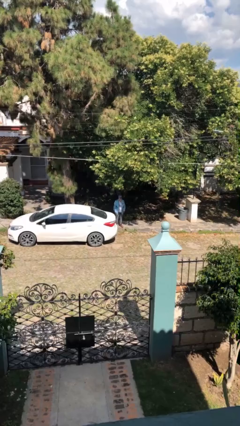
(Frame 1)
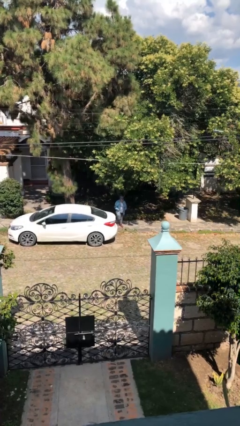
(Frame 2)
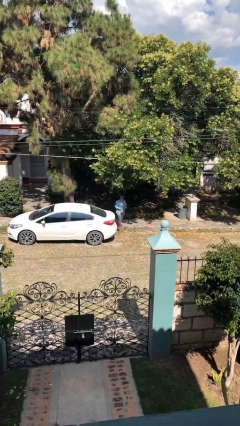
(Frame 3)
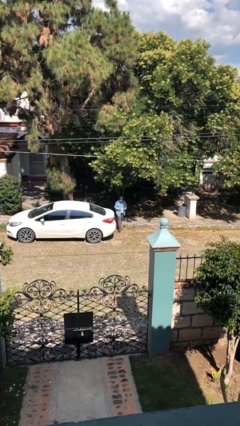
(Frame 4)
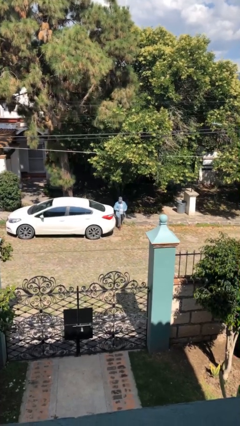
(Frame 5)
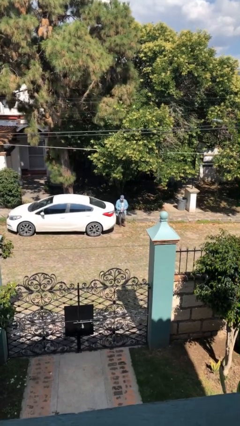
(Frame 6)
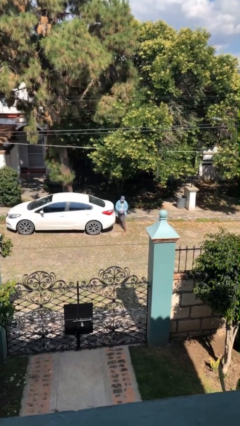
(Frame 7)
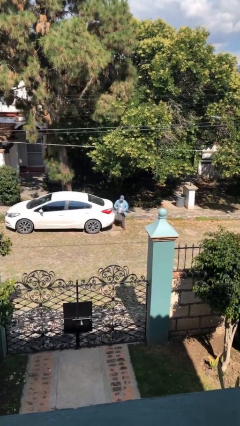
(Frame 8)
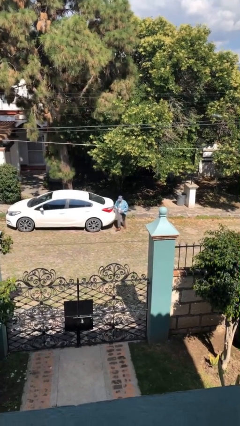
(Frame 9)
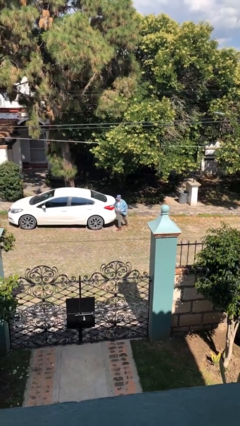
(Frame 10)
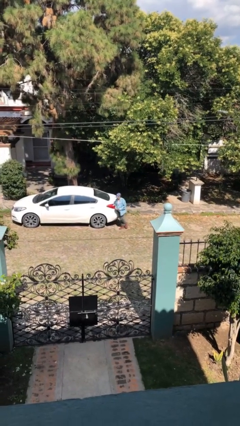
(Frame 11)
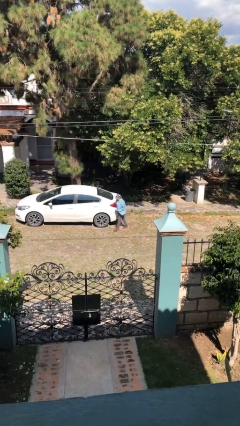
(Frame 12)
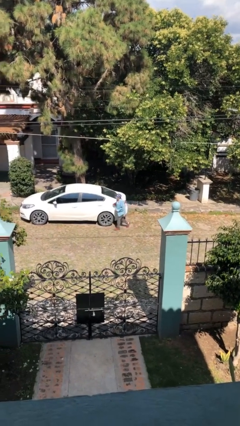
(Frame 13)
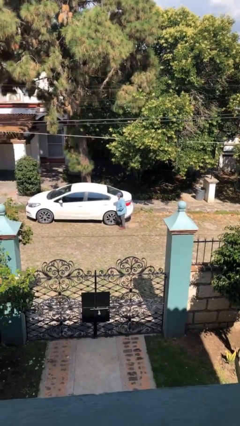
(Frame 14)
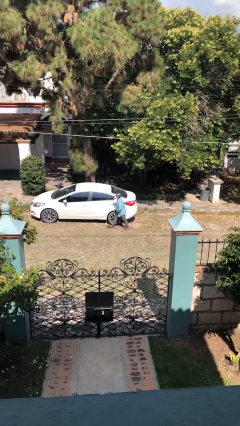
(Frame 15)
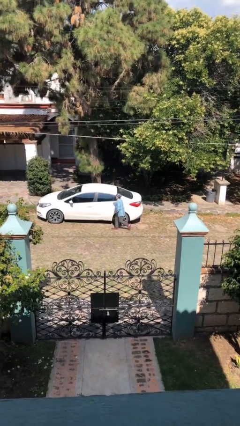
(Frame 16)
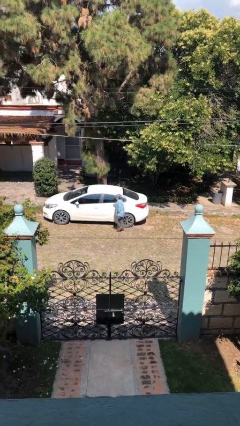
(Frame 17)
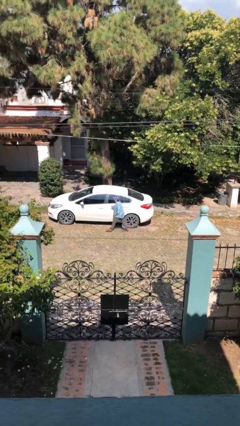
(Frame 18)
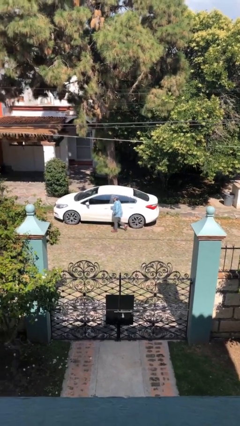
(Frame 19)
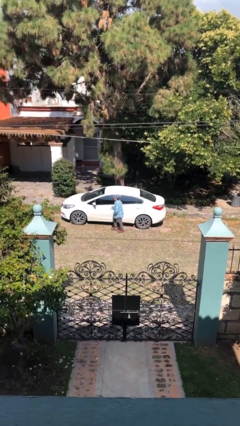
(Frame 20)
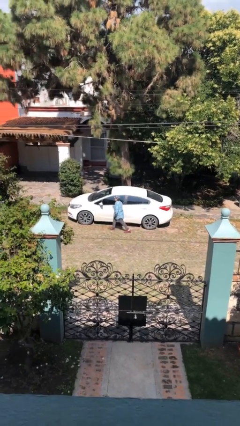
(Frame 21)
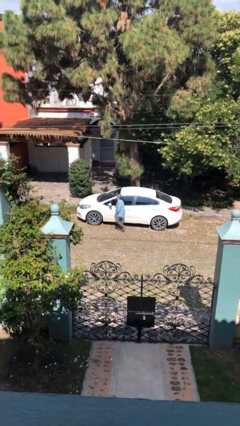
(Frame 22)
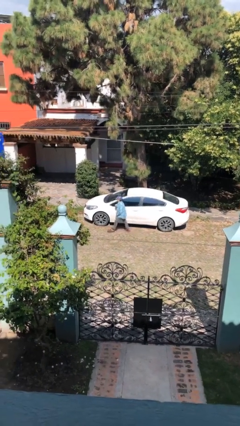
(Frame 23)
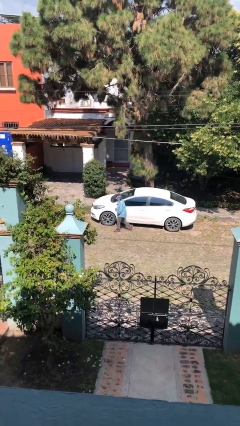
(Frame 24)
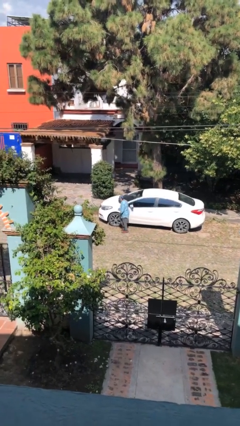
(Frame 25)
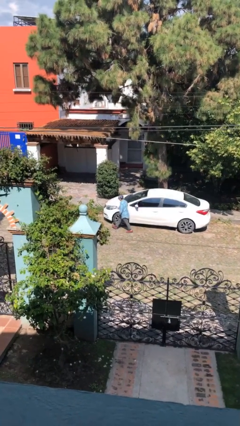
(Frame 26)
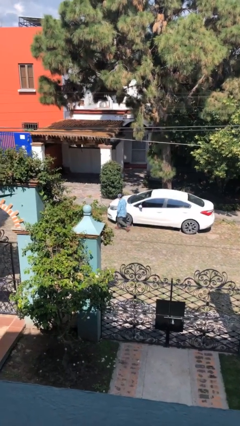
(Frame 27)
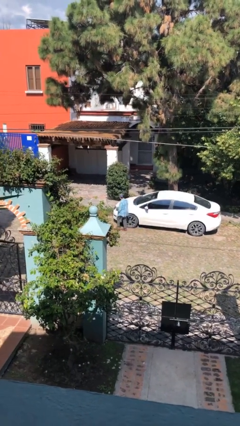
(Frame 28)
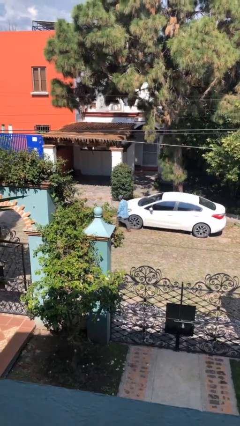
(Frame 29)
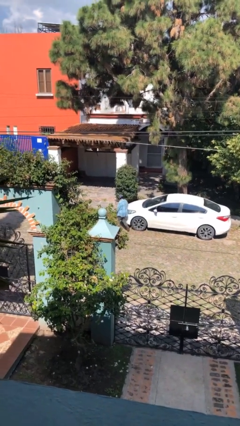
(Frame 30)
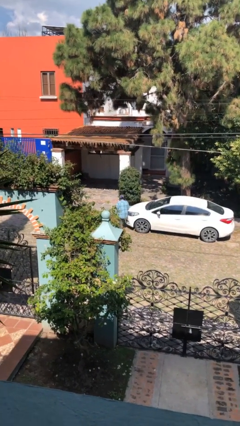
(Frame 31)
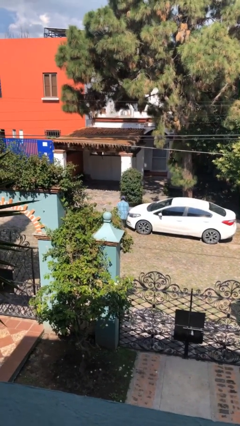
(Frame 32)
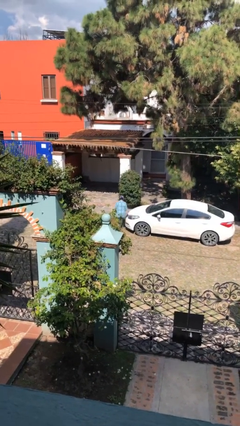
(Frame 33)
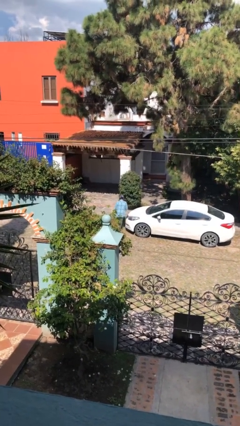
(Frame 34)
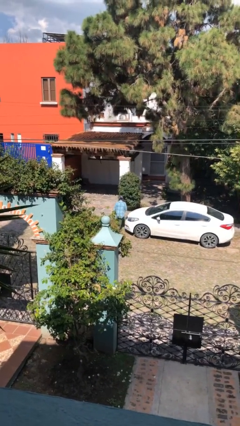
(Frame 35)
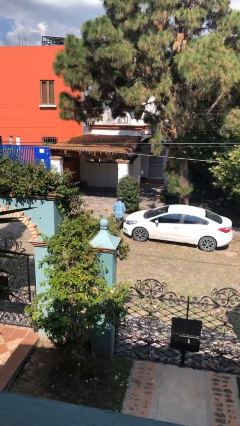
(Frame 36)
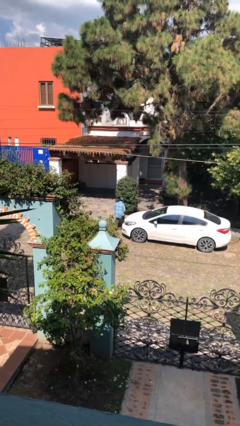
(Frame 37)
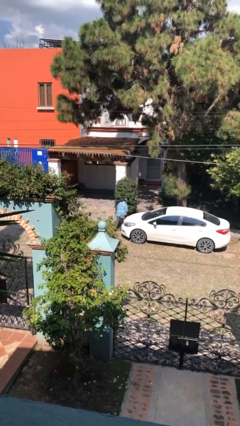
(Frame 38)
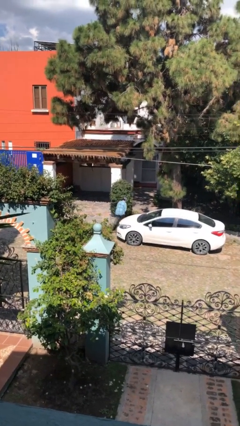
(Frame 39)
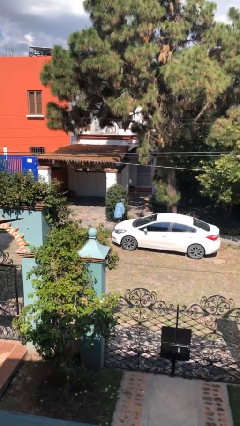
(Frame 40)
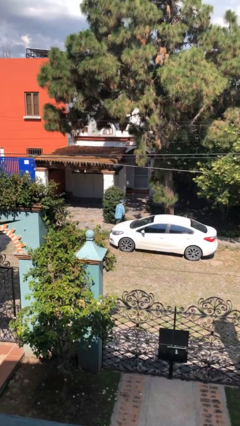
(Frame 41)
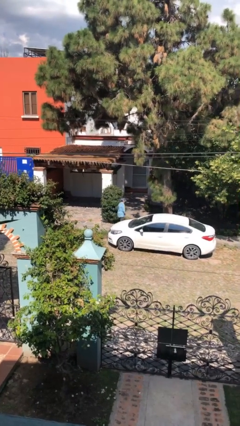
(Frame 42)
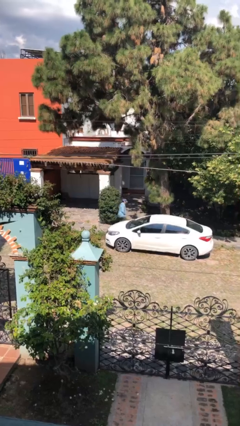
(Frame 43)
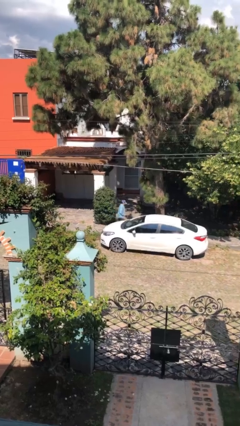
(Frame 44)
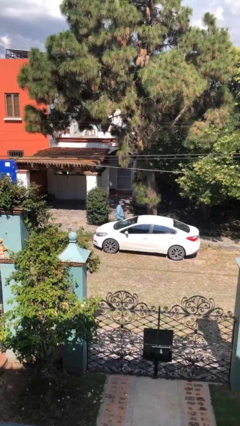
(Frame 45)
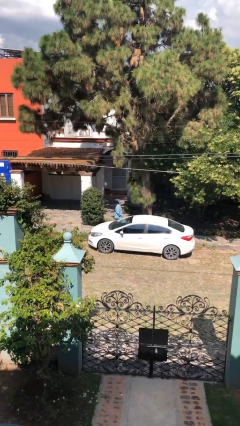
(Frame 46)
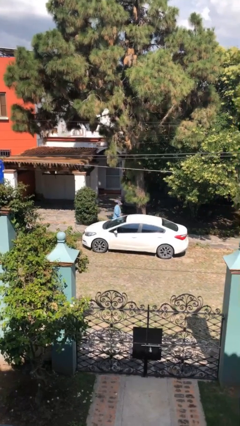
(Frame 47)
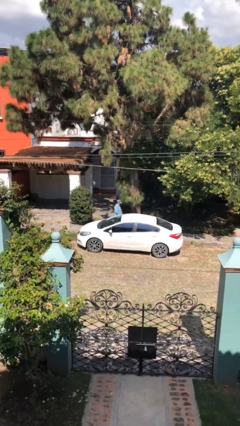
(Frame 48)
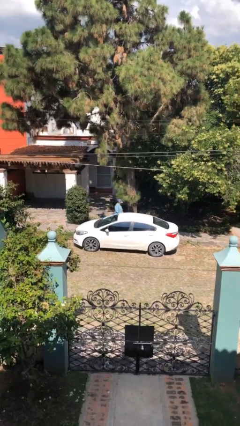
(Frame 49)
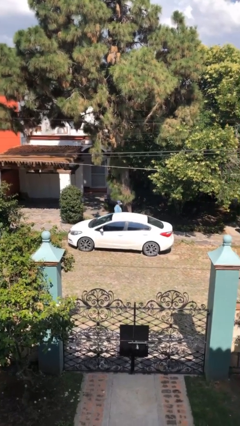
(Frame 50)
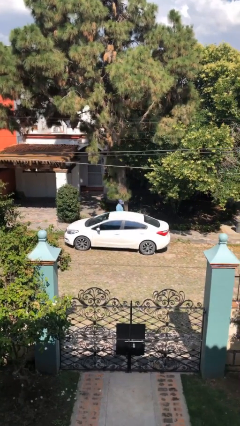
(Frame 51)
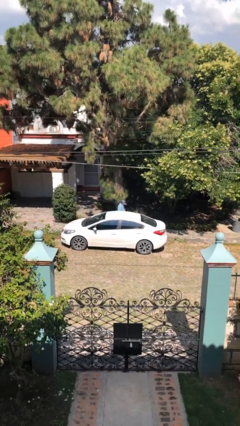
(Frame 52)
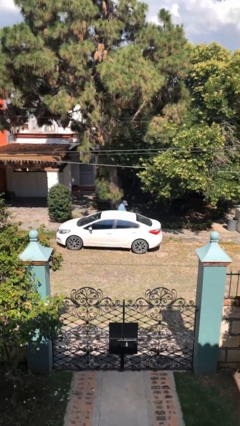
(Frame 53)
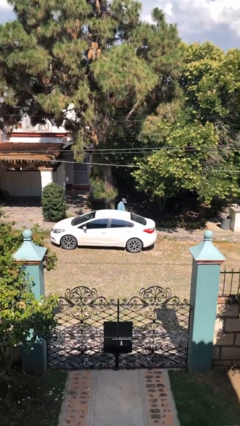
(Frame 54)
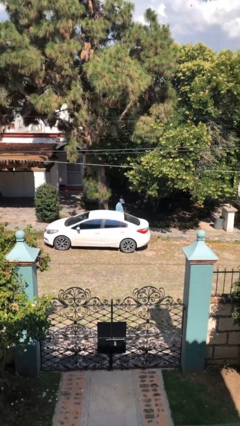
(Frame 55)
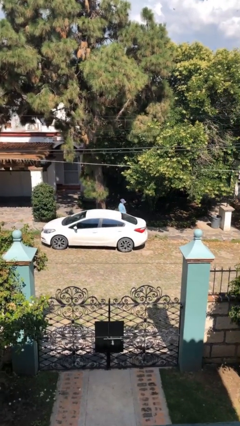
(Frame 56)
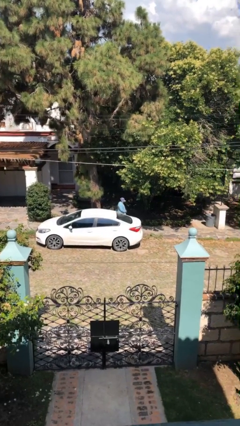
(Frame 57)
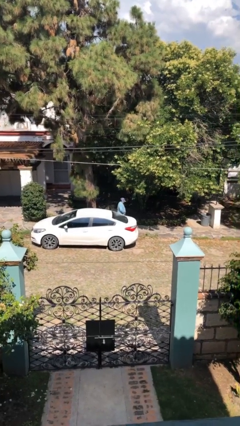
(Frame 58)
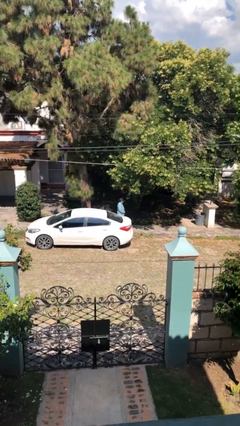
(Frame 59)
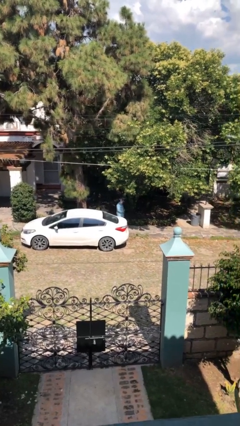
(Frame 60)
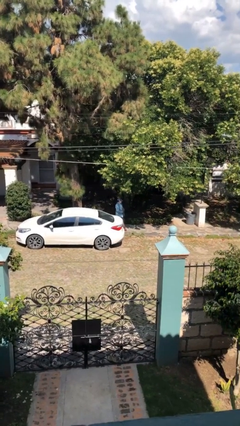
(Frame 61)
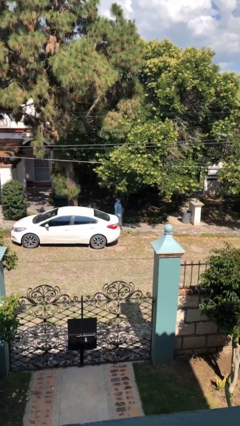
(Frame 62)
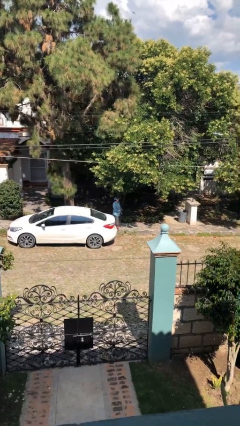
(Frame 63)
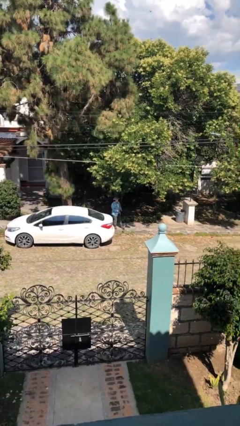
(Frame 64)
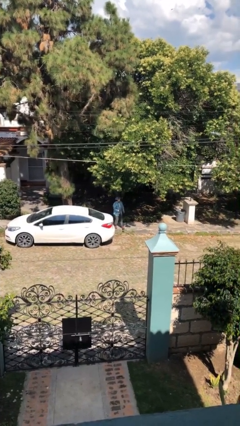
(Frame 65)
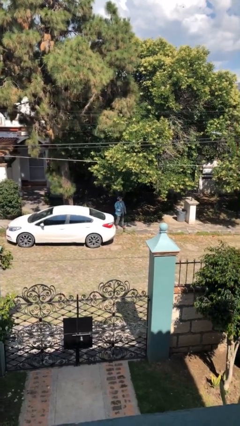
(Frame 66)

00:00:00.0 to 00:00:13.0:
person walks around car

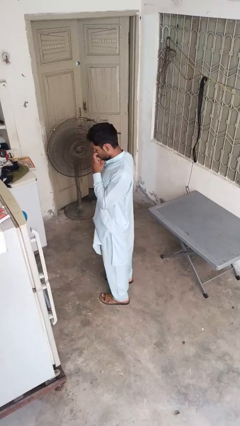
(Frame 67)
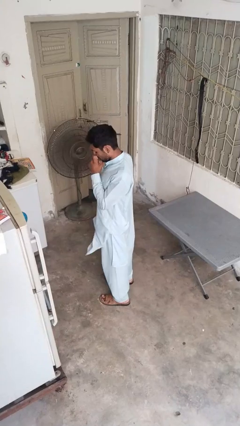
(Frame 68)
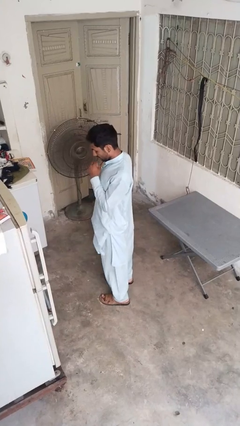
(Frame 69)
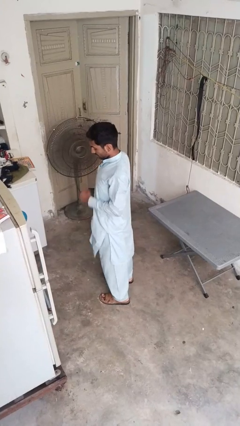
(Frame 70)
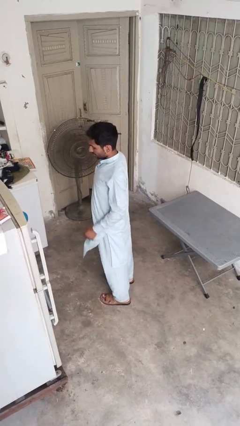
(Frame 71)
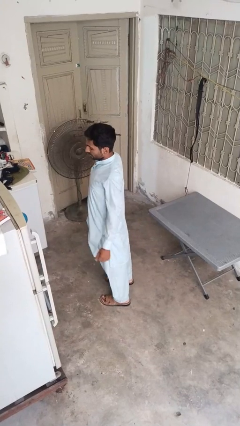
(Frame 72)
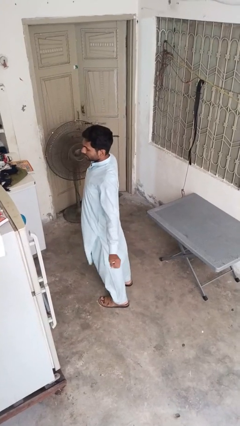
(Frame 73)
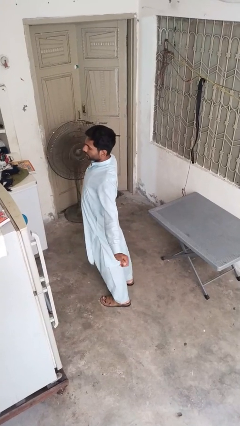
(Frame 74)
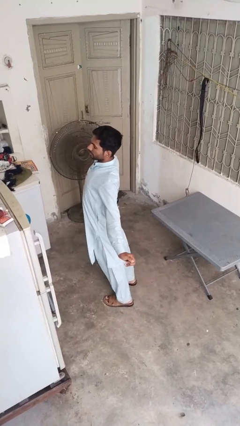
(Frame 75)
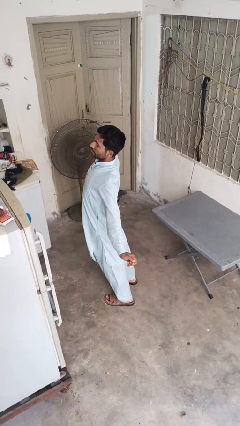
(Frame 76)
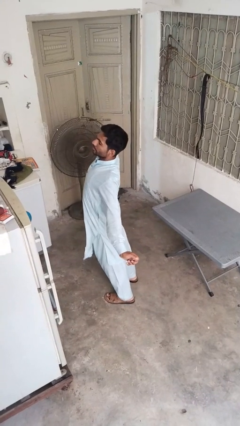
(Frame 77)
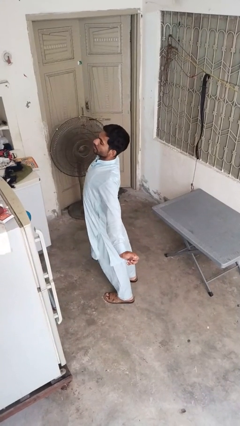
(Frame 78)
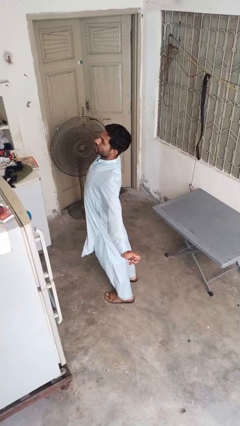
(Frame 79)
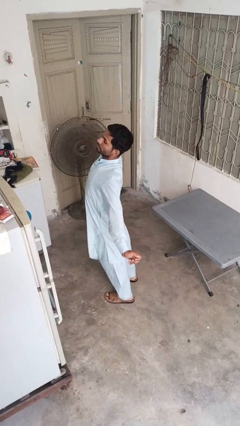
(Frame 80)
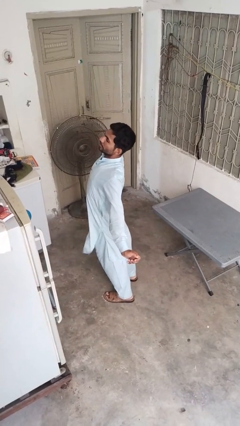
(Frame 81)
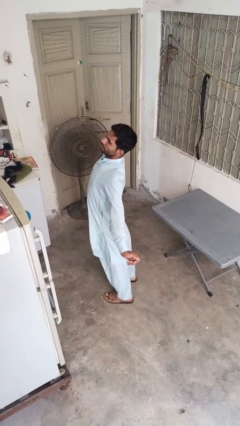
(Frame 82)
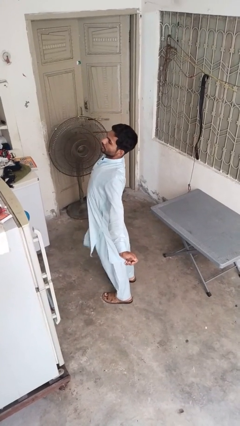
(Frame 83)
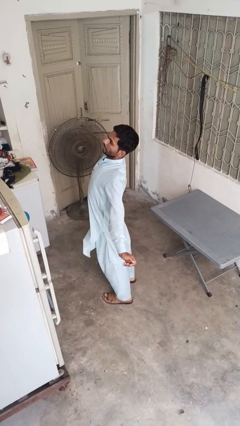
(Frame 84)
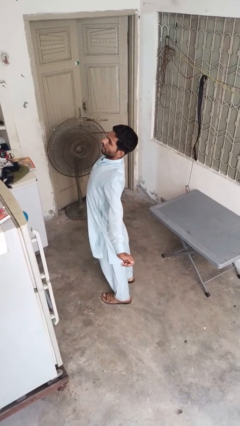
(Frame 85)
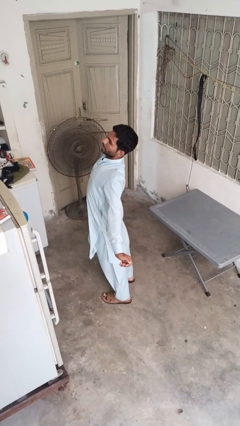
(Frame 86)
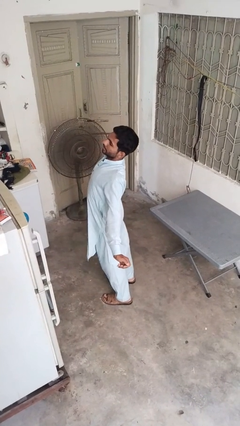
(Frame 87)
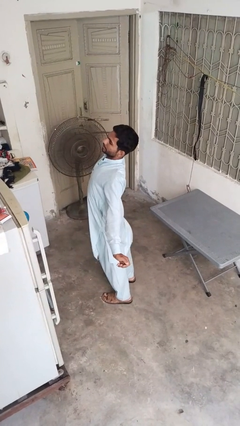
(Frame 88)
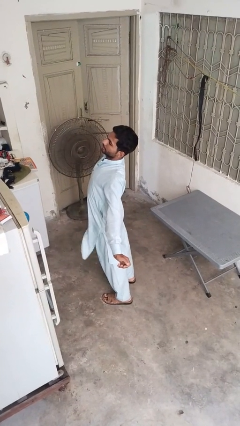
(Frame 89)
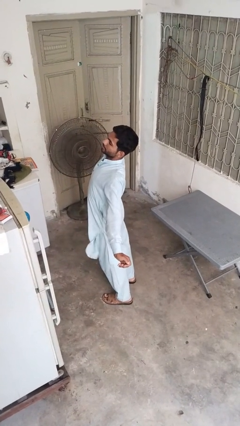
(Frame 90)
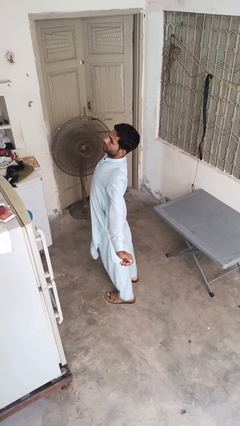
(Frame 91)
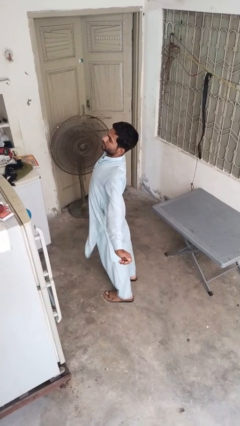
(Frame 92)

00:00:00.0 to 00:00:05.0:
person stretches back

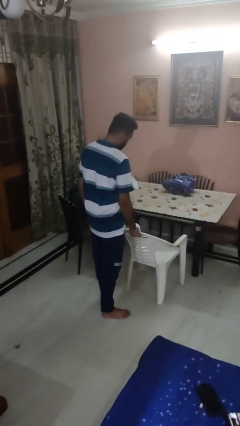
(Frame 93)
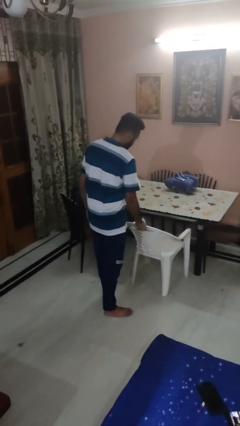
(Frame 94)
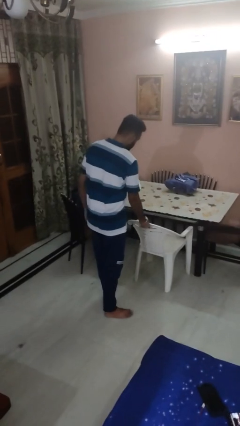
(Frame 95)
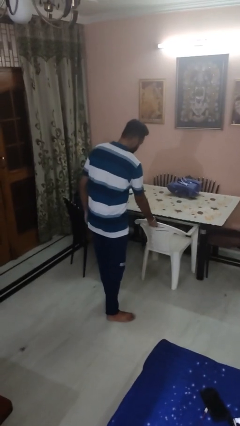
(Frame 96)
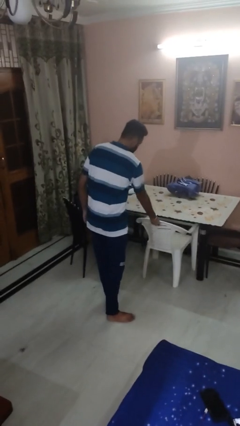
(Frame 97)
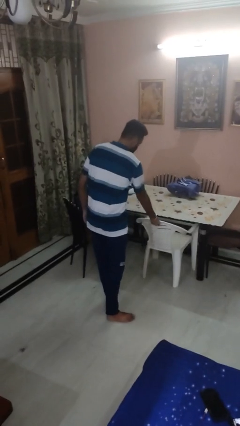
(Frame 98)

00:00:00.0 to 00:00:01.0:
person pushes in chair
